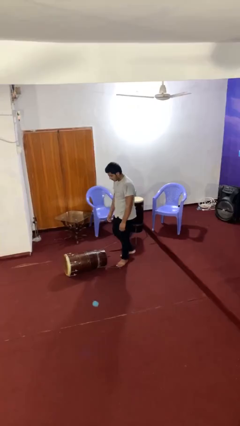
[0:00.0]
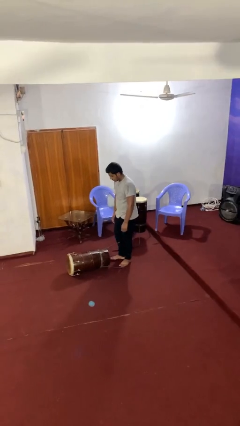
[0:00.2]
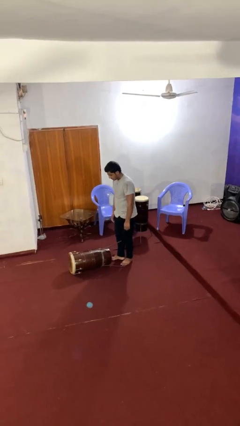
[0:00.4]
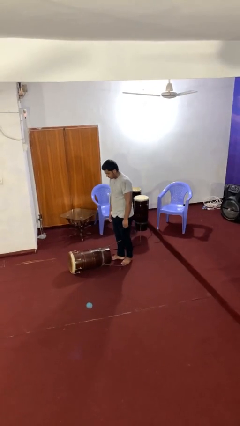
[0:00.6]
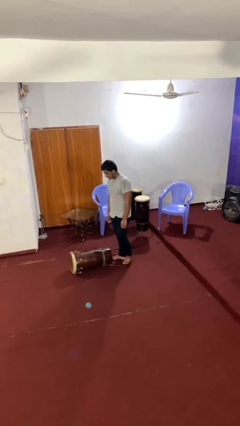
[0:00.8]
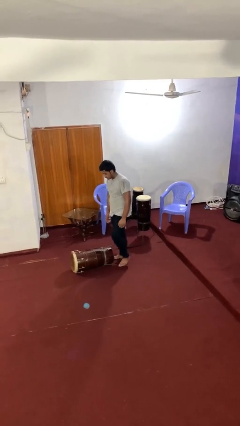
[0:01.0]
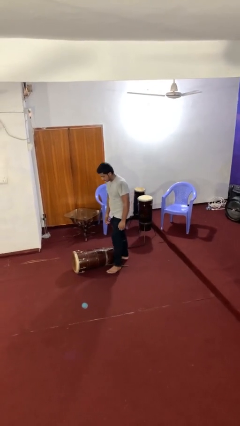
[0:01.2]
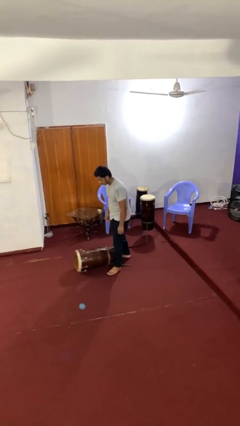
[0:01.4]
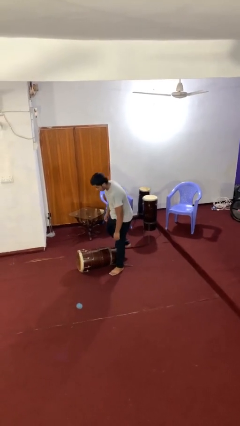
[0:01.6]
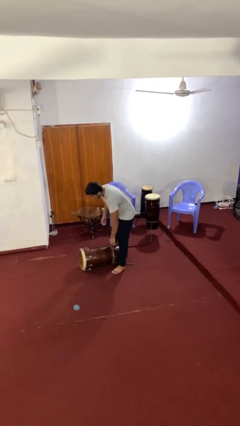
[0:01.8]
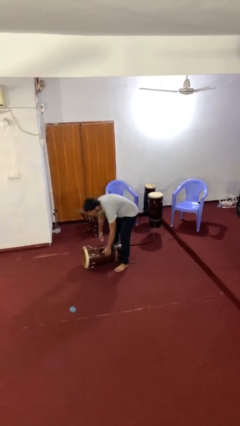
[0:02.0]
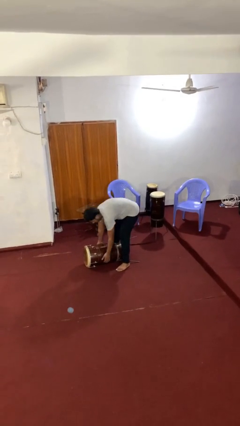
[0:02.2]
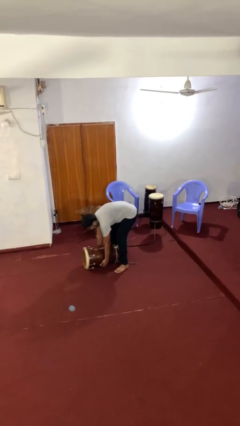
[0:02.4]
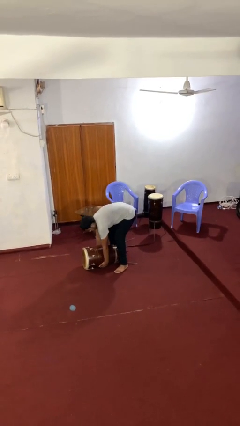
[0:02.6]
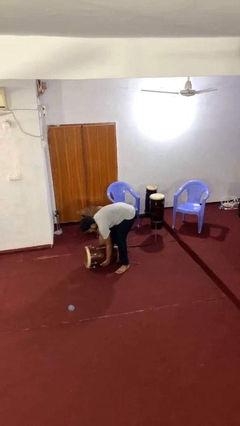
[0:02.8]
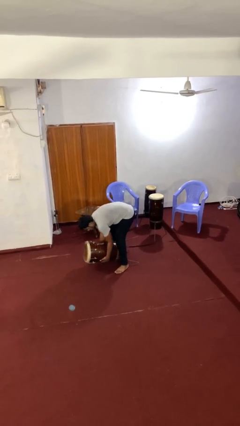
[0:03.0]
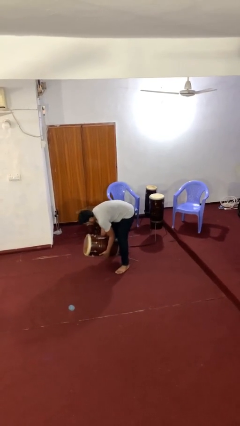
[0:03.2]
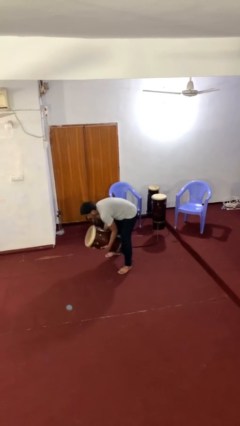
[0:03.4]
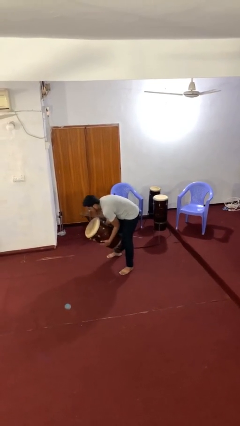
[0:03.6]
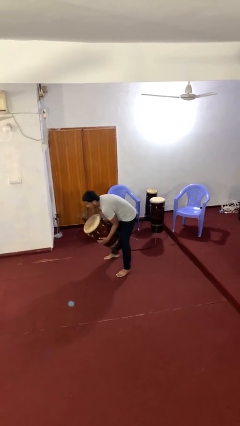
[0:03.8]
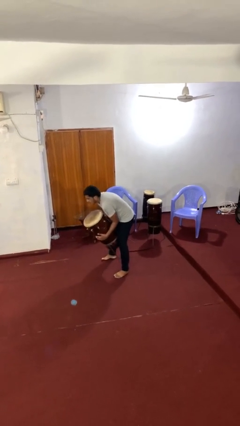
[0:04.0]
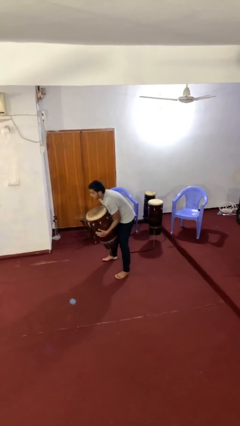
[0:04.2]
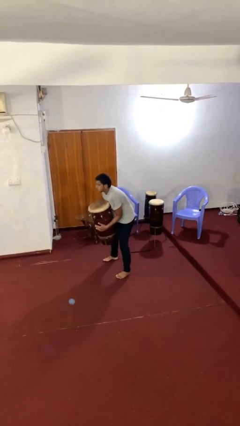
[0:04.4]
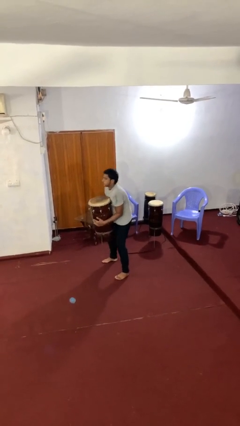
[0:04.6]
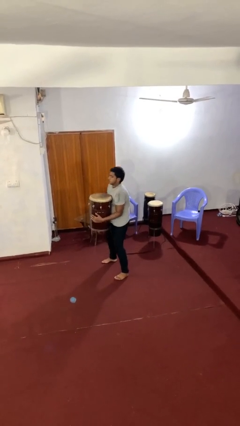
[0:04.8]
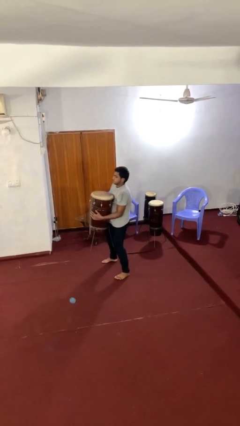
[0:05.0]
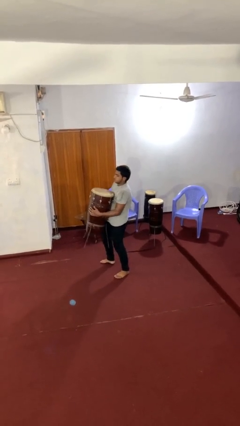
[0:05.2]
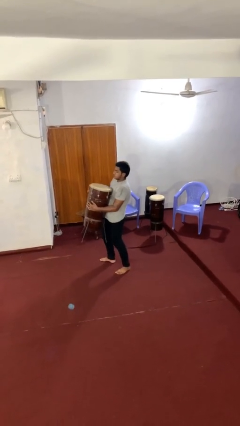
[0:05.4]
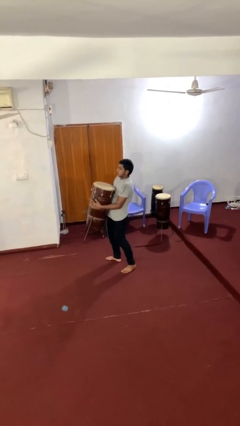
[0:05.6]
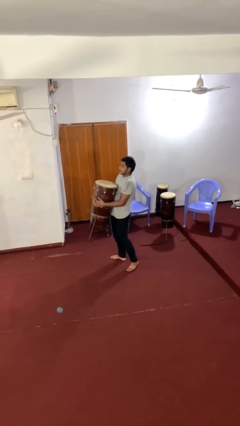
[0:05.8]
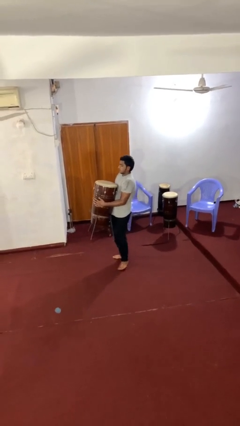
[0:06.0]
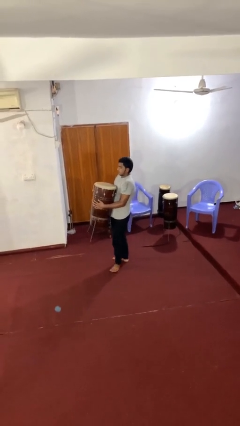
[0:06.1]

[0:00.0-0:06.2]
person picks up object from floor

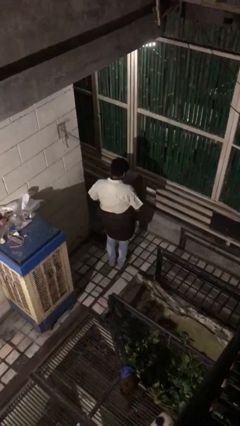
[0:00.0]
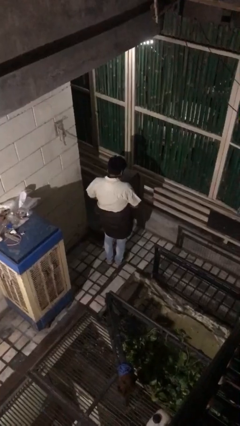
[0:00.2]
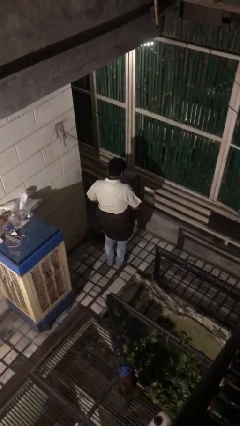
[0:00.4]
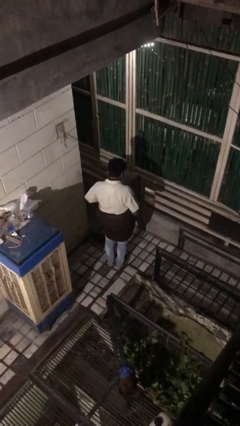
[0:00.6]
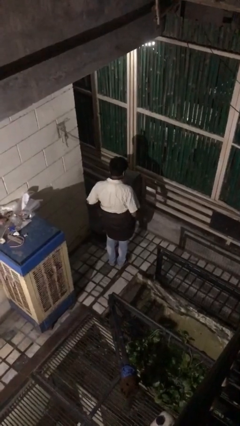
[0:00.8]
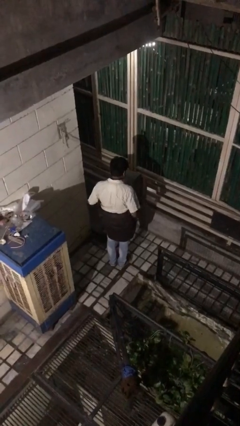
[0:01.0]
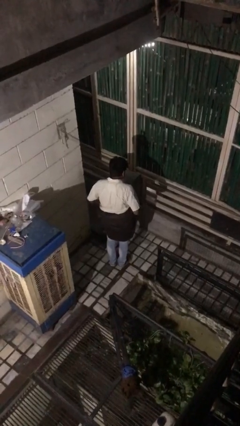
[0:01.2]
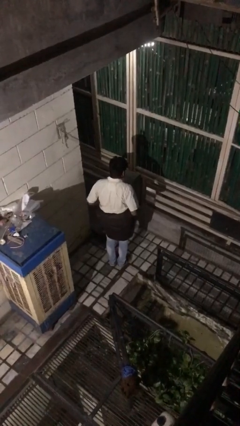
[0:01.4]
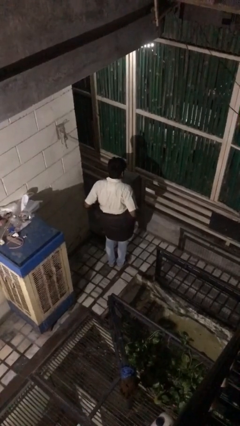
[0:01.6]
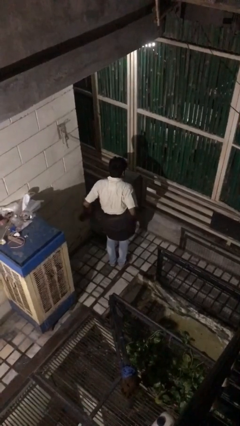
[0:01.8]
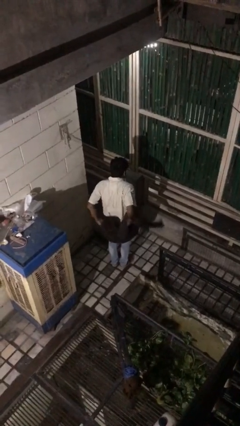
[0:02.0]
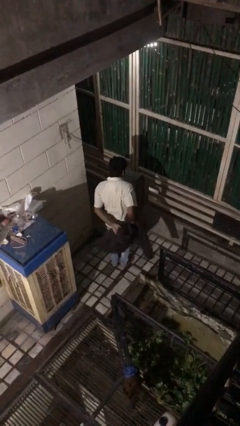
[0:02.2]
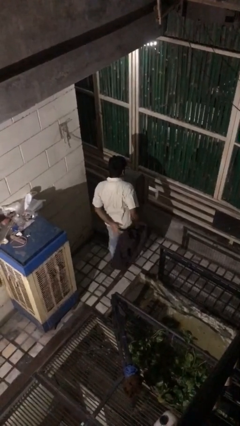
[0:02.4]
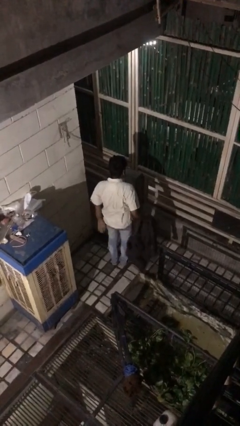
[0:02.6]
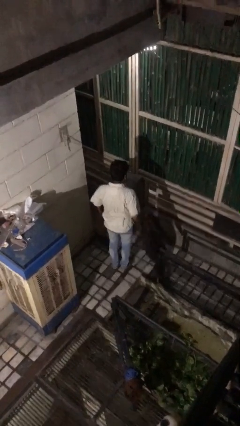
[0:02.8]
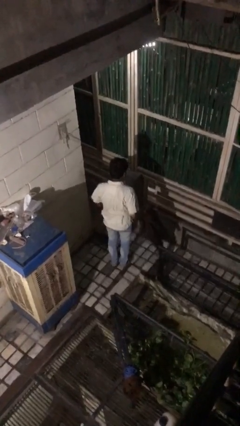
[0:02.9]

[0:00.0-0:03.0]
person unties jacket around waist

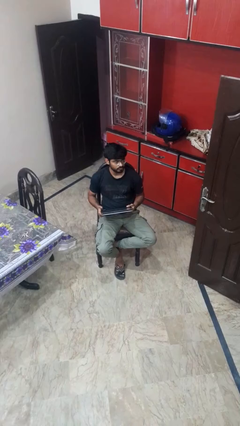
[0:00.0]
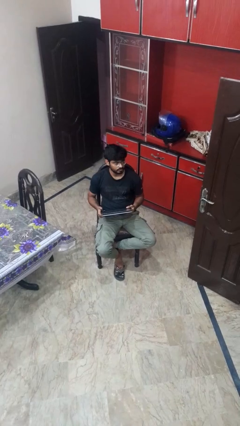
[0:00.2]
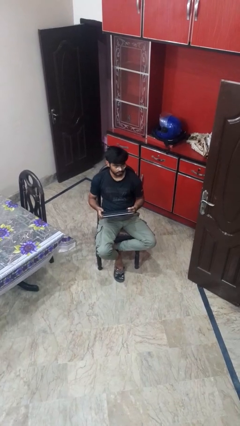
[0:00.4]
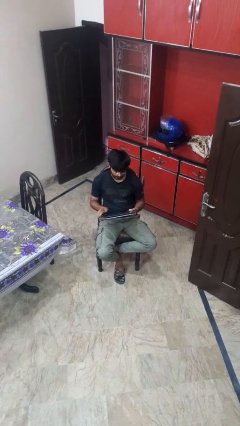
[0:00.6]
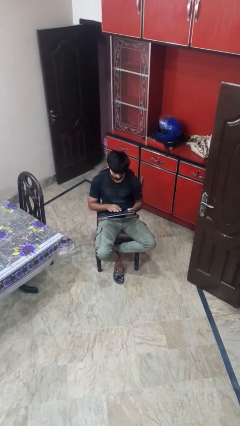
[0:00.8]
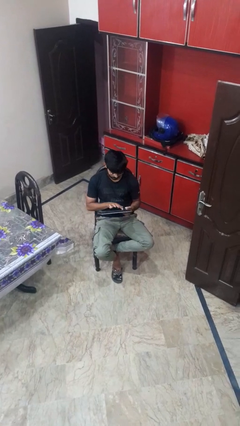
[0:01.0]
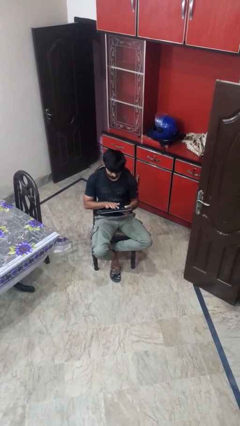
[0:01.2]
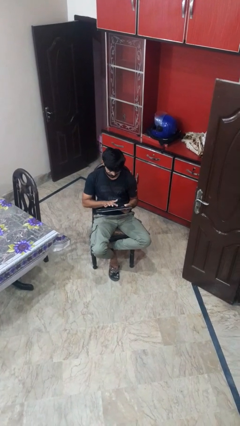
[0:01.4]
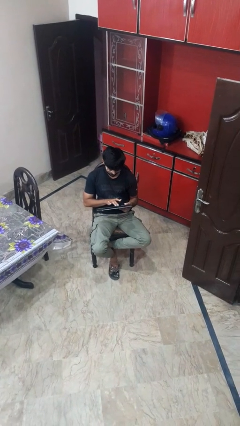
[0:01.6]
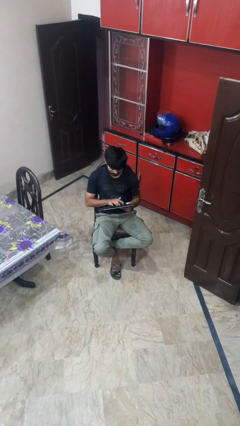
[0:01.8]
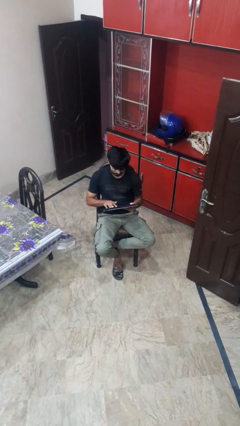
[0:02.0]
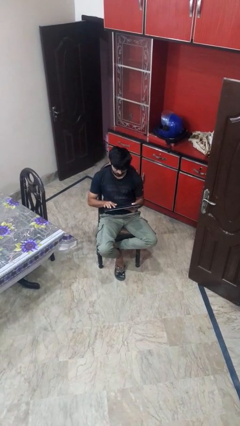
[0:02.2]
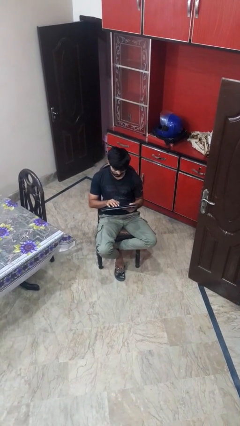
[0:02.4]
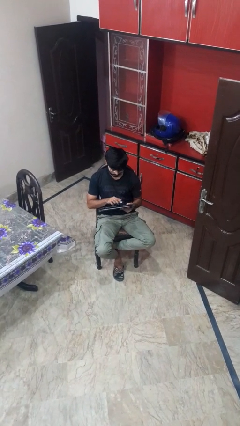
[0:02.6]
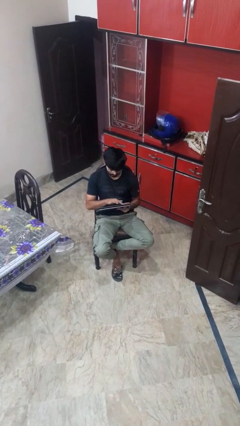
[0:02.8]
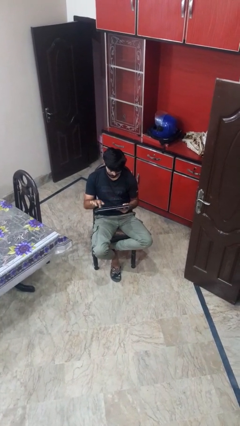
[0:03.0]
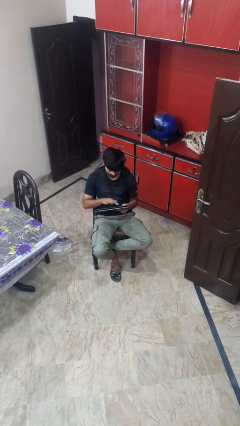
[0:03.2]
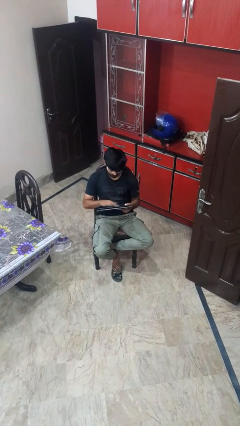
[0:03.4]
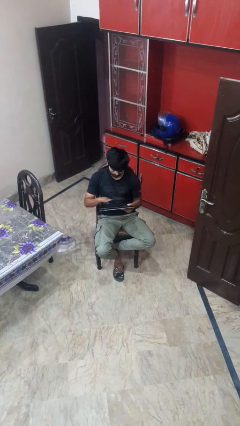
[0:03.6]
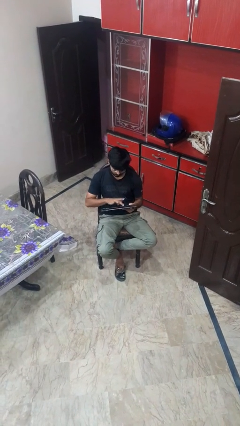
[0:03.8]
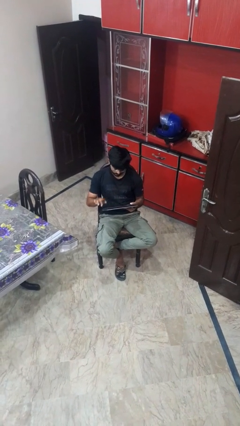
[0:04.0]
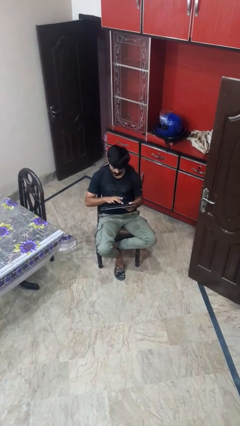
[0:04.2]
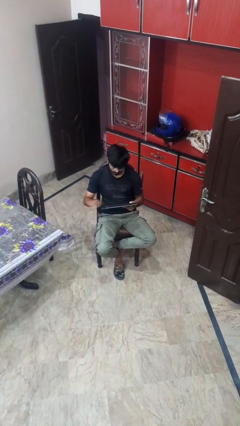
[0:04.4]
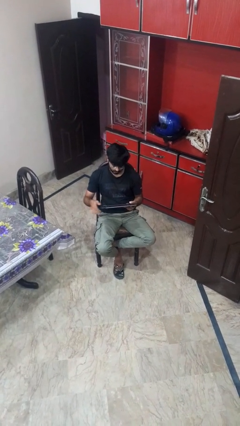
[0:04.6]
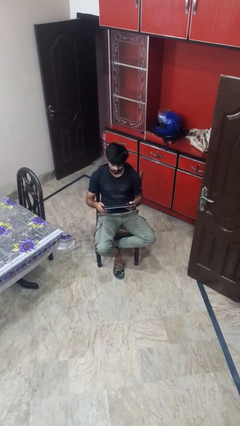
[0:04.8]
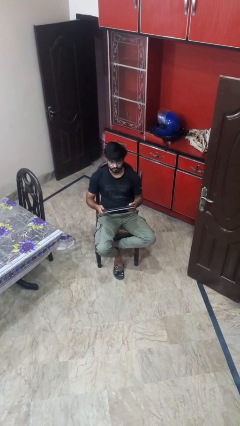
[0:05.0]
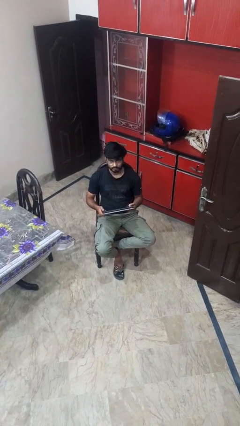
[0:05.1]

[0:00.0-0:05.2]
person interacts with tablet

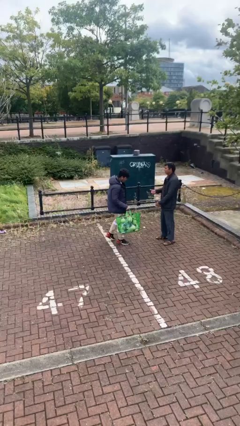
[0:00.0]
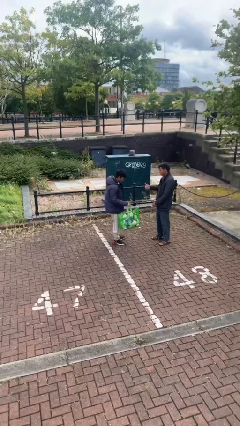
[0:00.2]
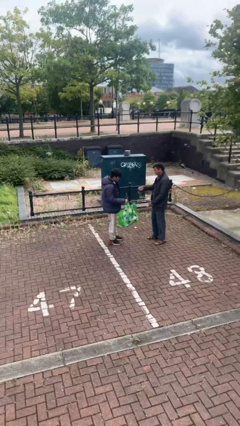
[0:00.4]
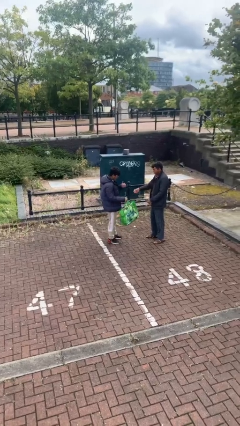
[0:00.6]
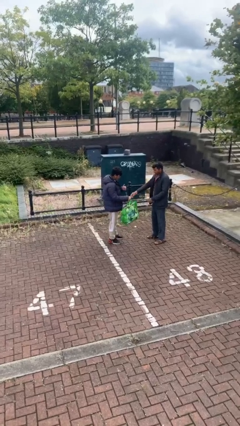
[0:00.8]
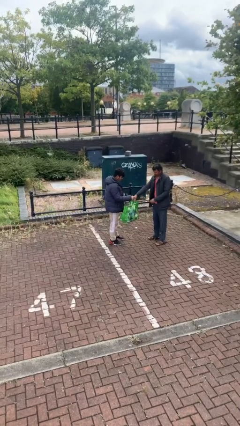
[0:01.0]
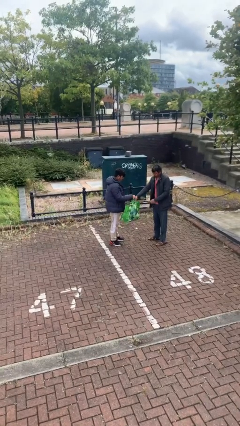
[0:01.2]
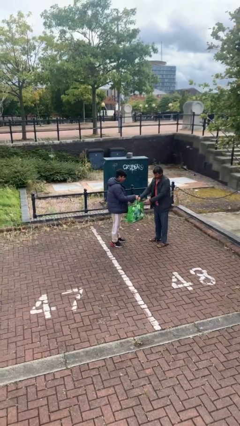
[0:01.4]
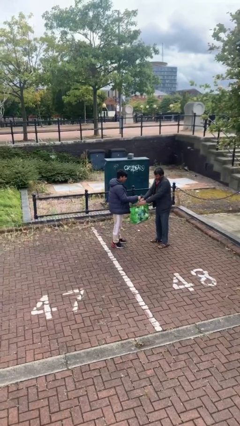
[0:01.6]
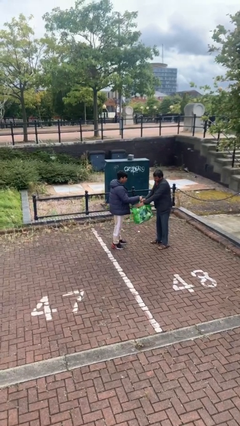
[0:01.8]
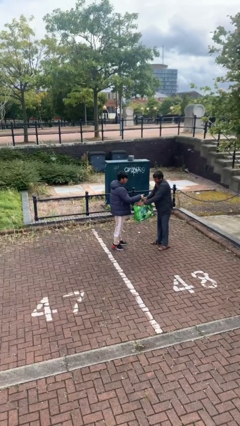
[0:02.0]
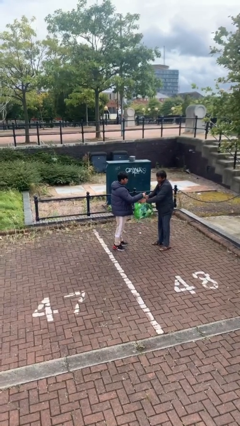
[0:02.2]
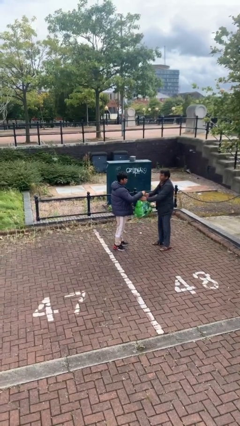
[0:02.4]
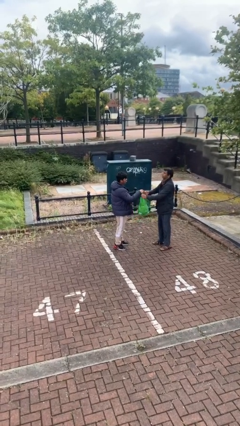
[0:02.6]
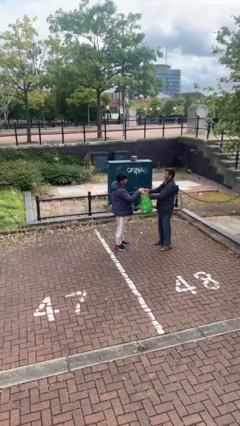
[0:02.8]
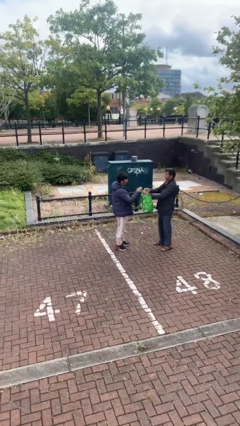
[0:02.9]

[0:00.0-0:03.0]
person transfers object to person

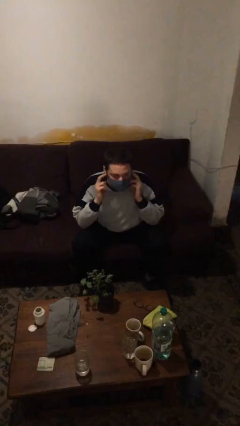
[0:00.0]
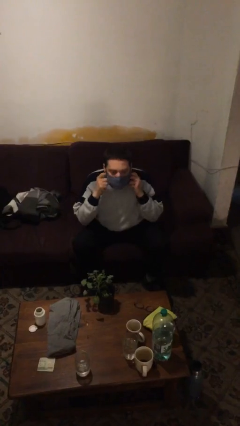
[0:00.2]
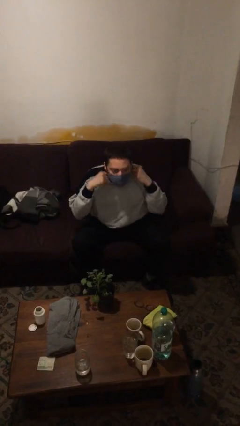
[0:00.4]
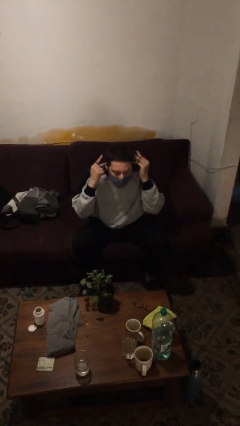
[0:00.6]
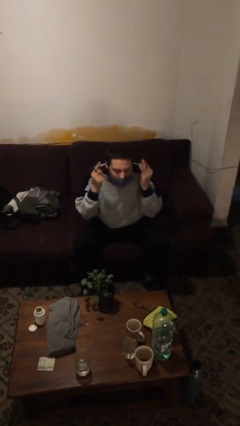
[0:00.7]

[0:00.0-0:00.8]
person takes off facemask
